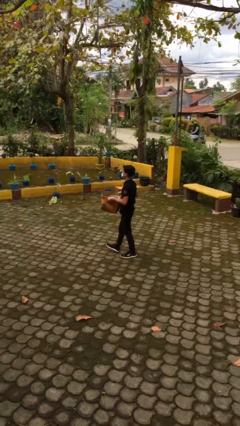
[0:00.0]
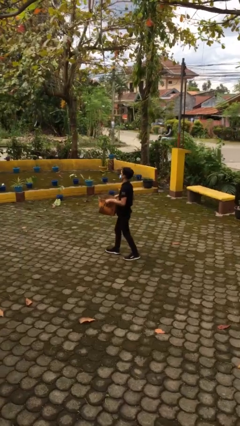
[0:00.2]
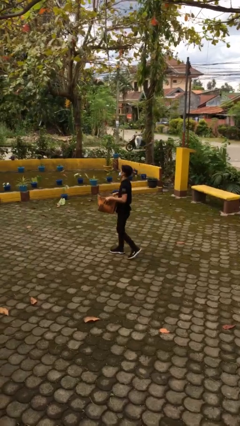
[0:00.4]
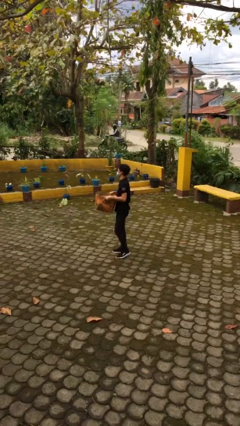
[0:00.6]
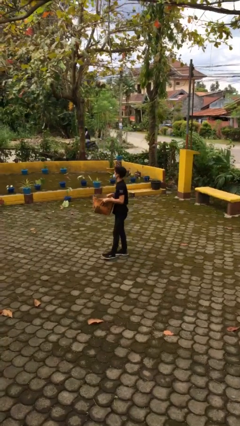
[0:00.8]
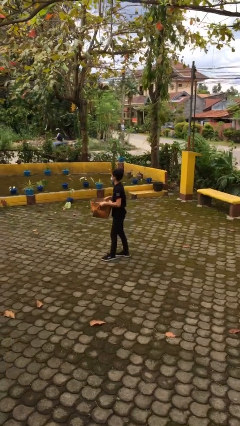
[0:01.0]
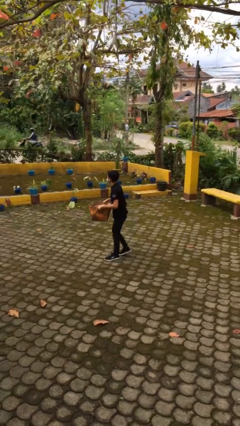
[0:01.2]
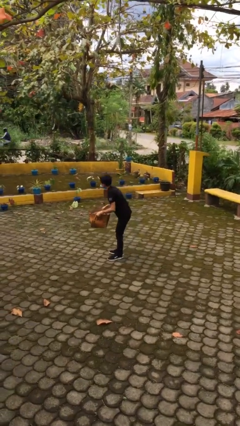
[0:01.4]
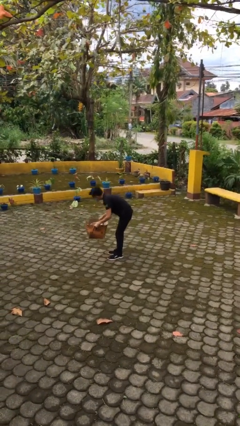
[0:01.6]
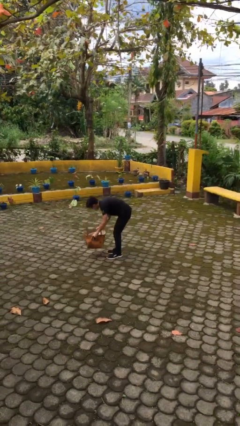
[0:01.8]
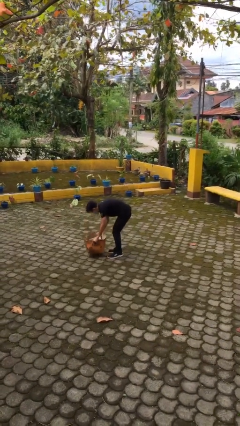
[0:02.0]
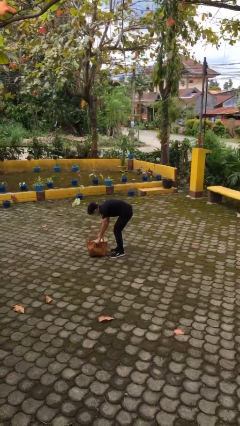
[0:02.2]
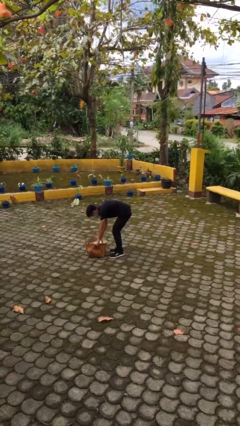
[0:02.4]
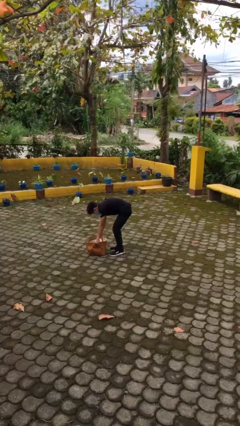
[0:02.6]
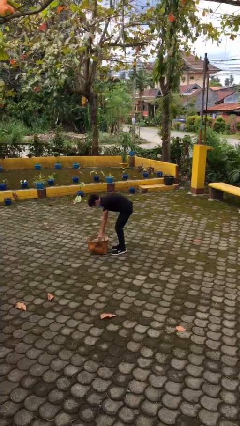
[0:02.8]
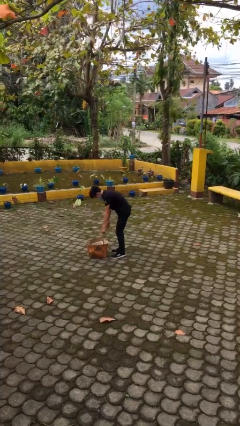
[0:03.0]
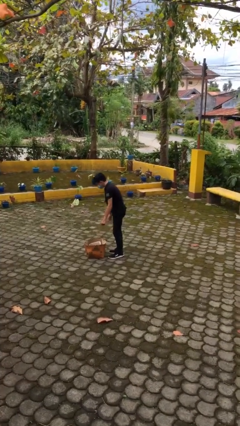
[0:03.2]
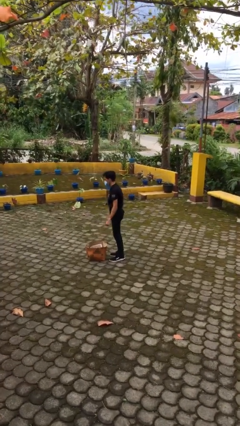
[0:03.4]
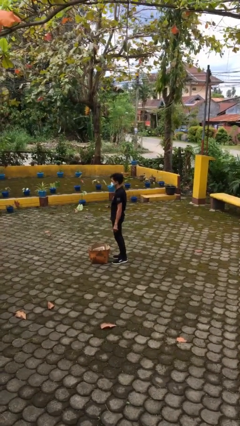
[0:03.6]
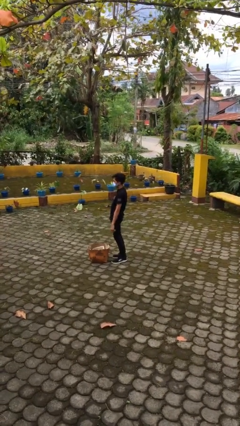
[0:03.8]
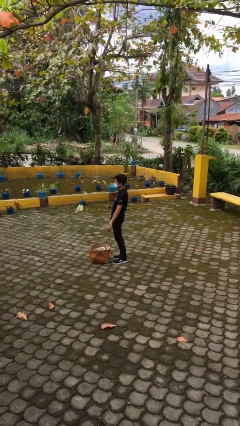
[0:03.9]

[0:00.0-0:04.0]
person puts down object on floor

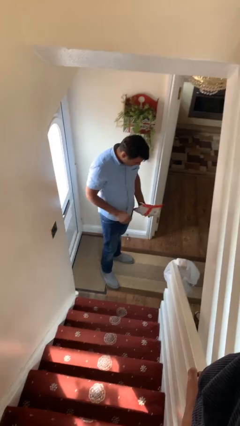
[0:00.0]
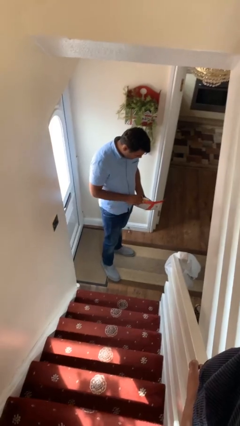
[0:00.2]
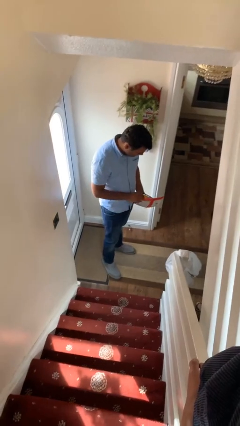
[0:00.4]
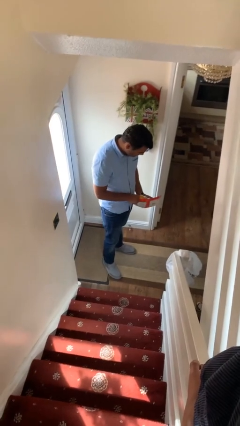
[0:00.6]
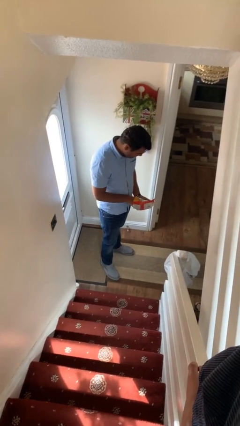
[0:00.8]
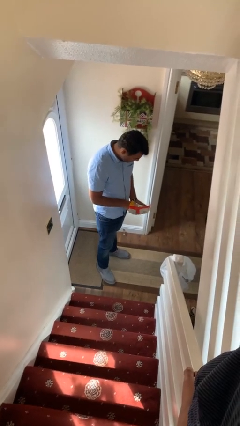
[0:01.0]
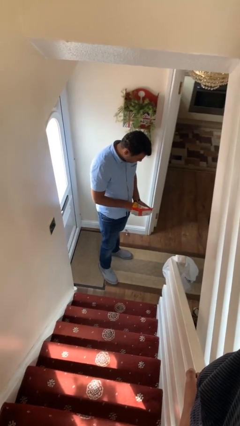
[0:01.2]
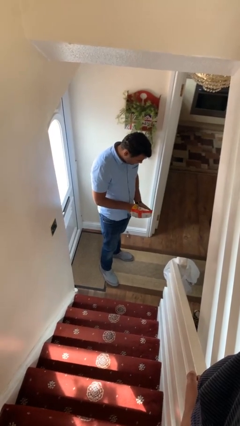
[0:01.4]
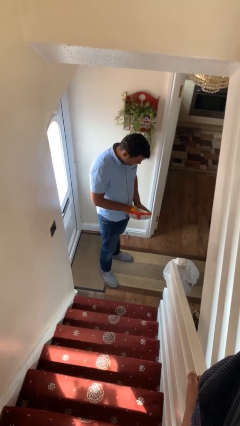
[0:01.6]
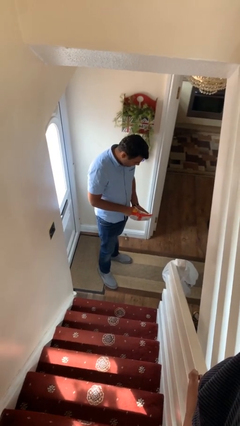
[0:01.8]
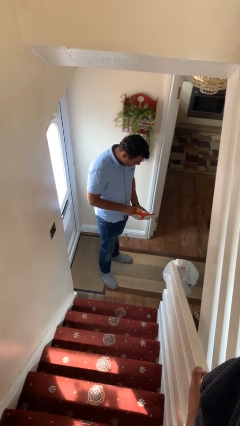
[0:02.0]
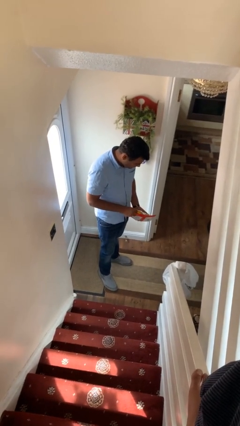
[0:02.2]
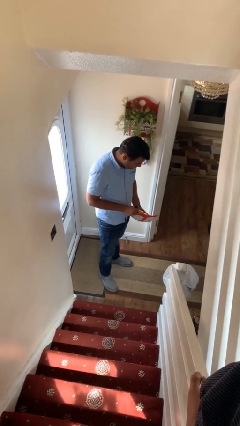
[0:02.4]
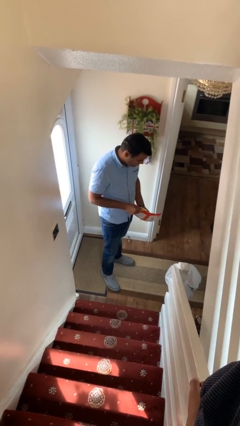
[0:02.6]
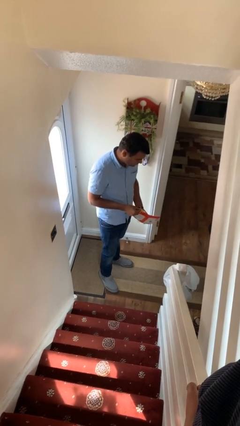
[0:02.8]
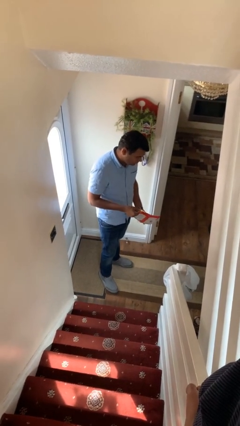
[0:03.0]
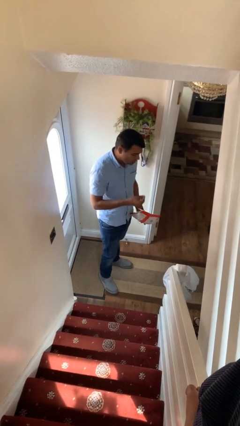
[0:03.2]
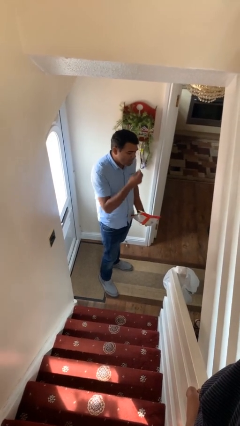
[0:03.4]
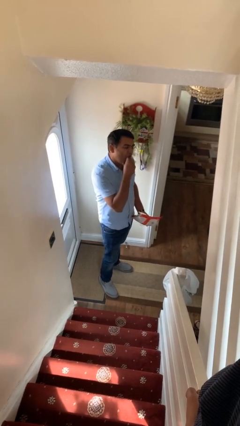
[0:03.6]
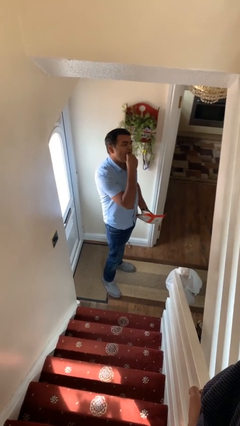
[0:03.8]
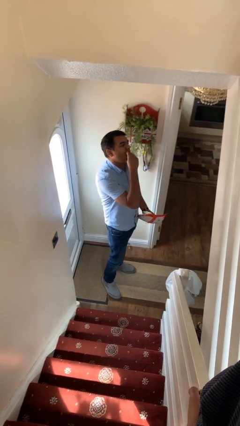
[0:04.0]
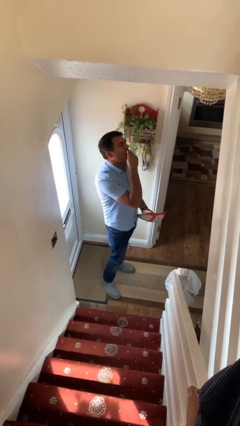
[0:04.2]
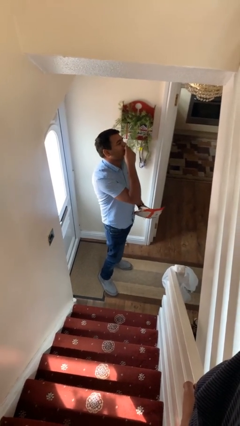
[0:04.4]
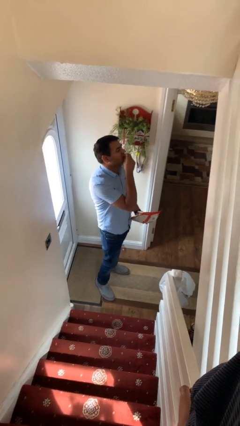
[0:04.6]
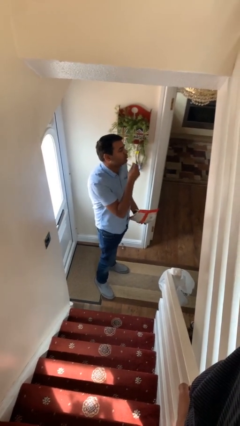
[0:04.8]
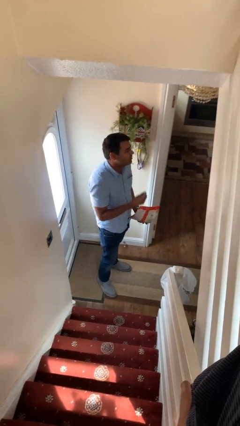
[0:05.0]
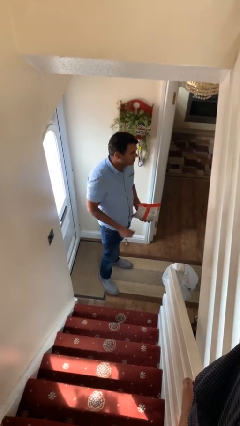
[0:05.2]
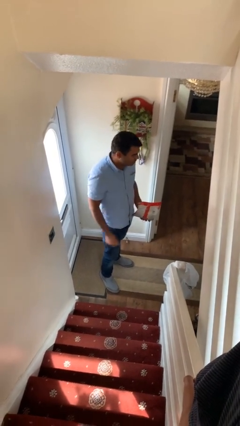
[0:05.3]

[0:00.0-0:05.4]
person eats snack from bag

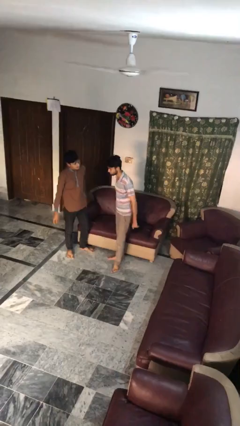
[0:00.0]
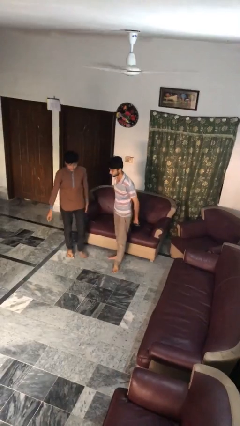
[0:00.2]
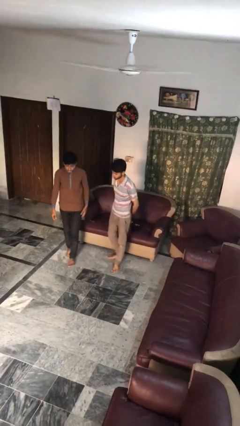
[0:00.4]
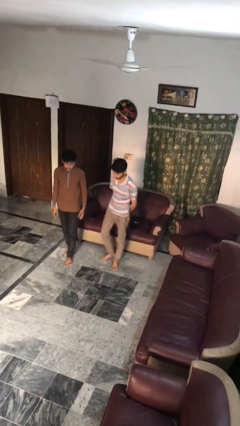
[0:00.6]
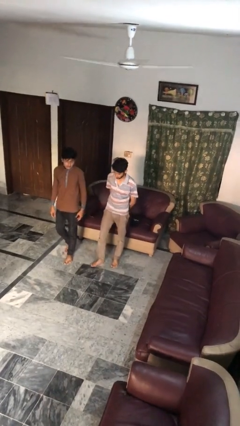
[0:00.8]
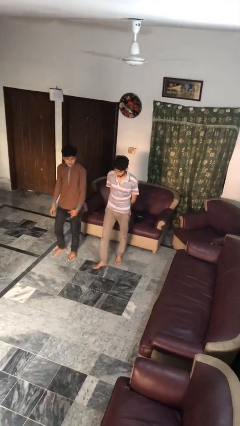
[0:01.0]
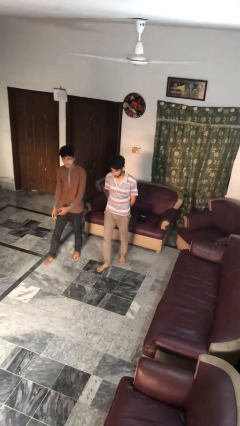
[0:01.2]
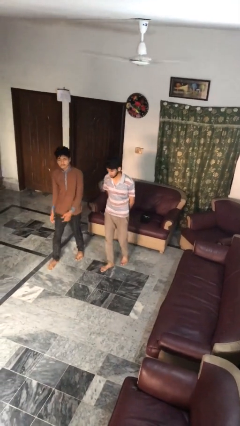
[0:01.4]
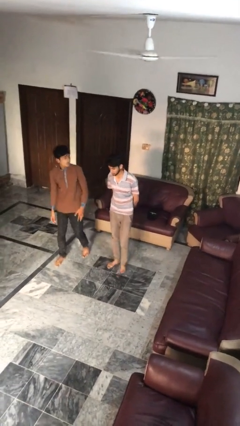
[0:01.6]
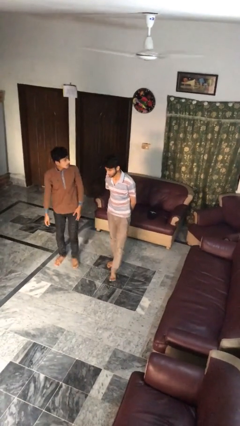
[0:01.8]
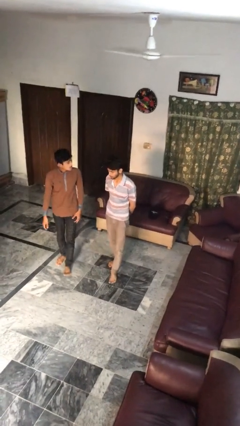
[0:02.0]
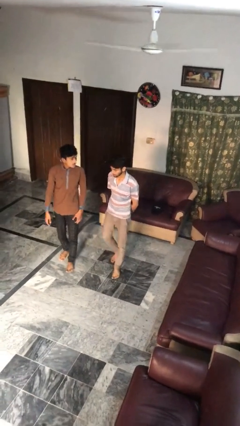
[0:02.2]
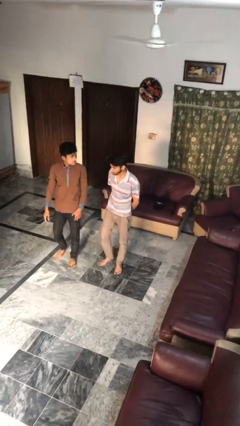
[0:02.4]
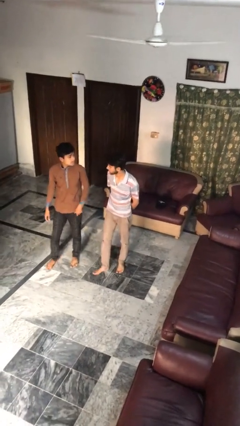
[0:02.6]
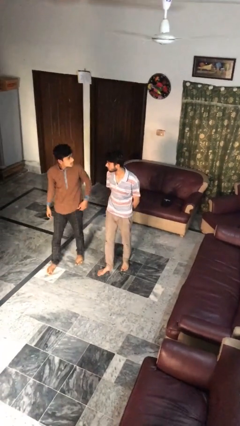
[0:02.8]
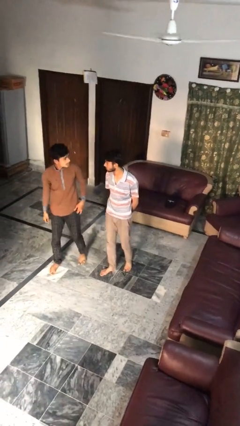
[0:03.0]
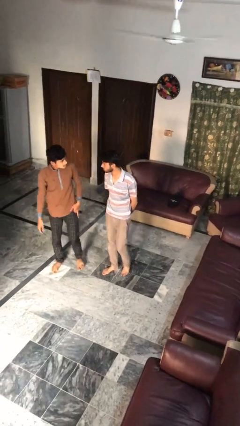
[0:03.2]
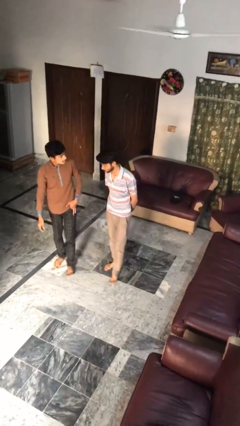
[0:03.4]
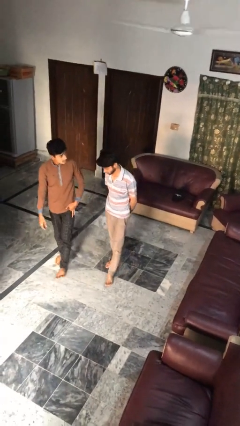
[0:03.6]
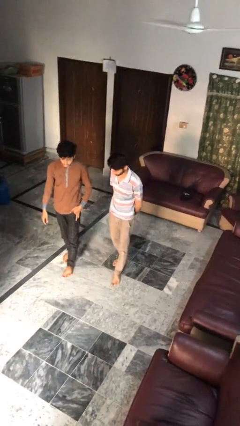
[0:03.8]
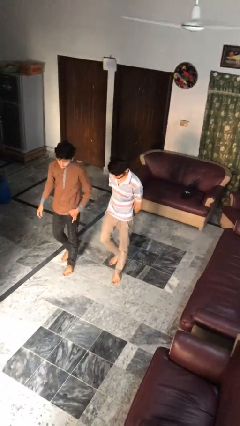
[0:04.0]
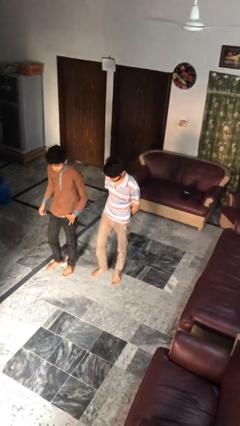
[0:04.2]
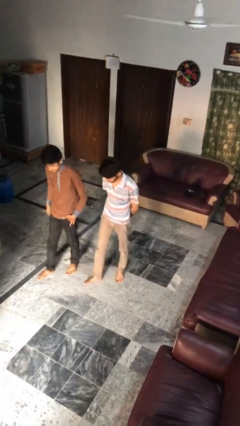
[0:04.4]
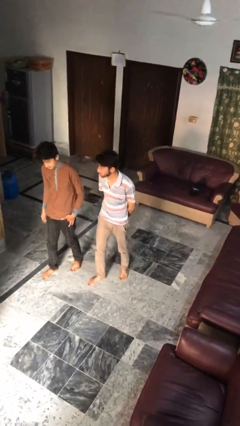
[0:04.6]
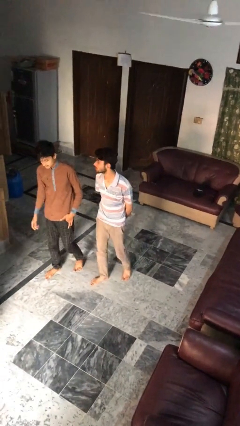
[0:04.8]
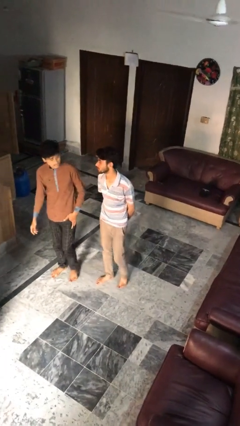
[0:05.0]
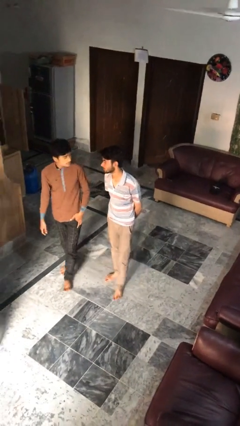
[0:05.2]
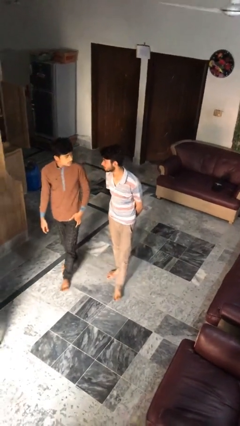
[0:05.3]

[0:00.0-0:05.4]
person talks to person

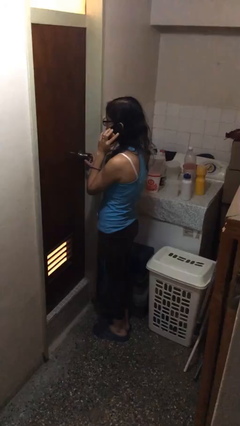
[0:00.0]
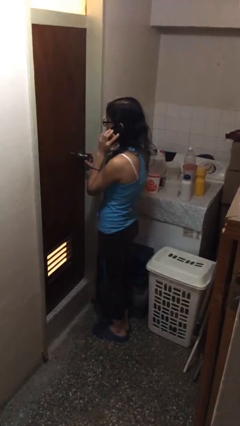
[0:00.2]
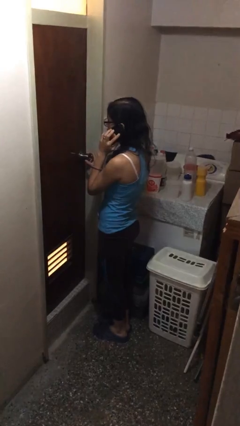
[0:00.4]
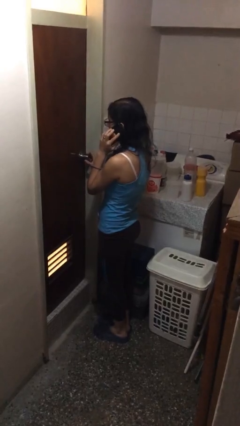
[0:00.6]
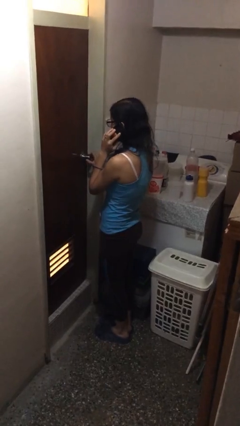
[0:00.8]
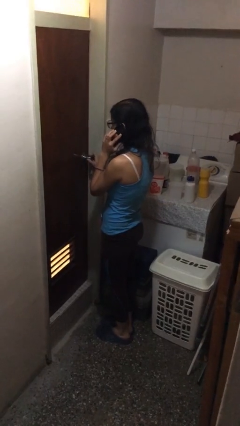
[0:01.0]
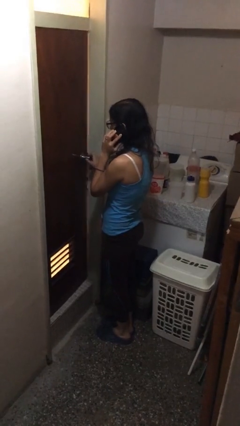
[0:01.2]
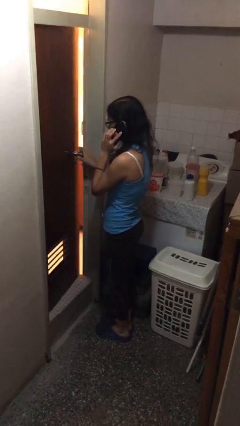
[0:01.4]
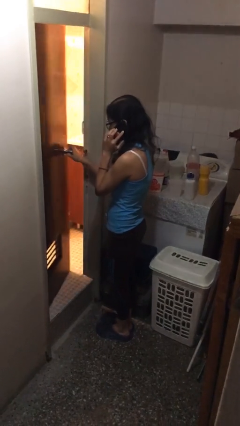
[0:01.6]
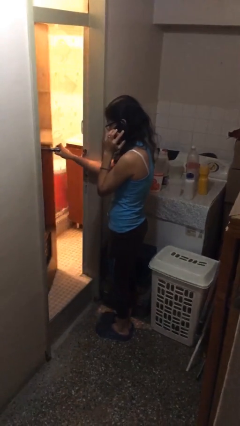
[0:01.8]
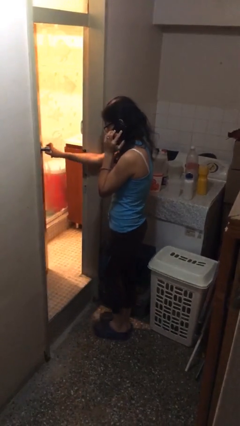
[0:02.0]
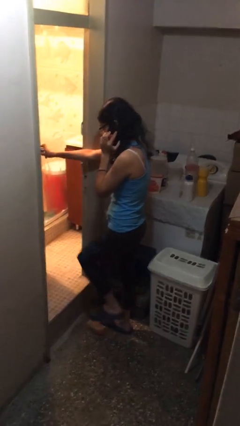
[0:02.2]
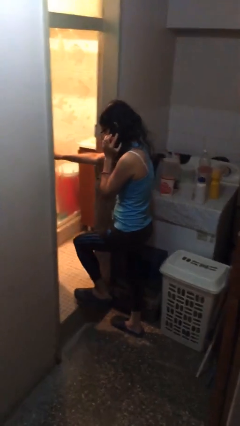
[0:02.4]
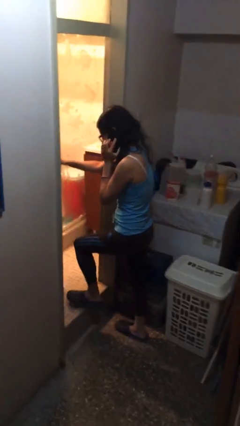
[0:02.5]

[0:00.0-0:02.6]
person opens facility door
